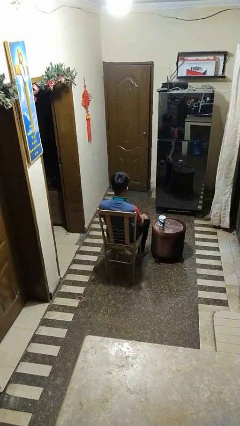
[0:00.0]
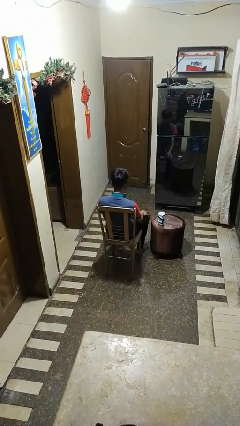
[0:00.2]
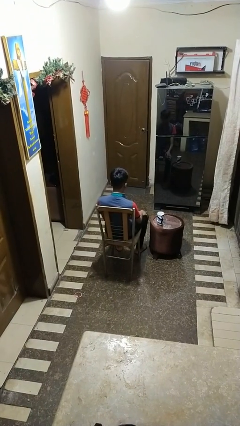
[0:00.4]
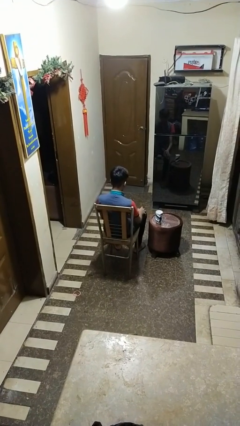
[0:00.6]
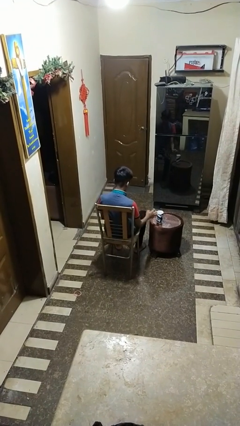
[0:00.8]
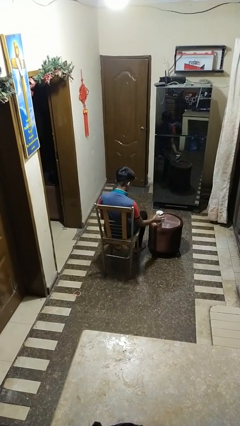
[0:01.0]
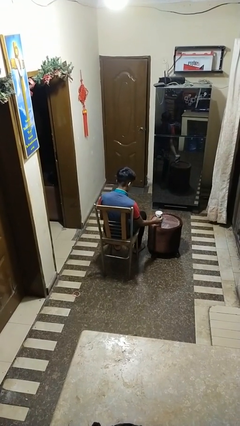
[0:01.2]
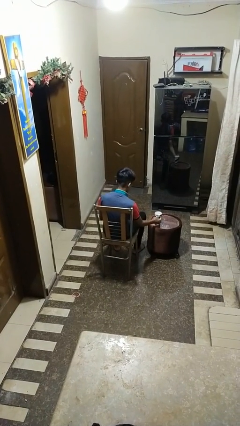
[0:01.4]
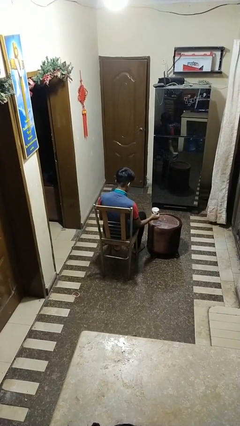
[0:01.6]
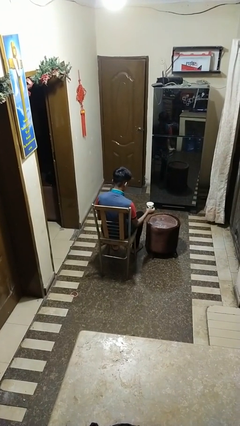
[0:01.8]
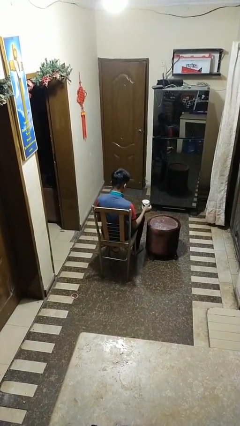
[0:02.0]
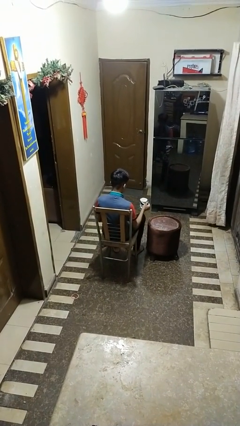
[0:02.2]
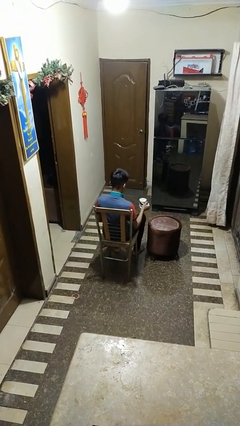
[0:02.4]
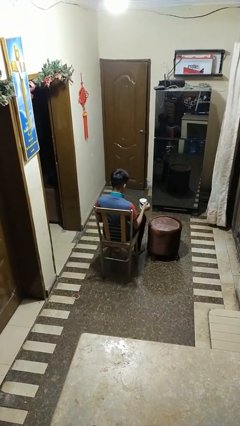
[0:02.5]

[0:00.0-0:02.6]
person picks up object from table

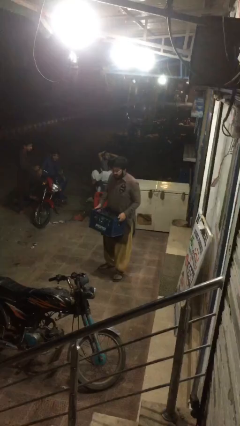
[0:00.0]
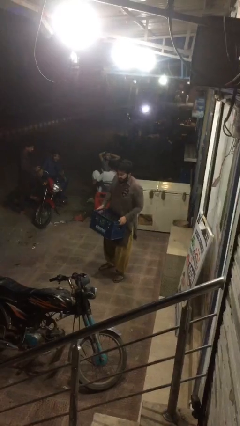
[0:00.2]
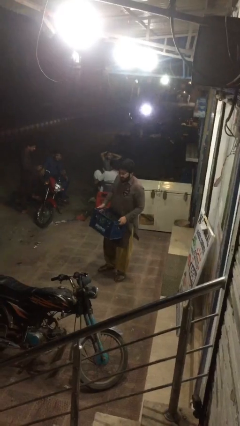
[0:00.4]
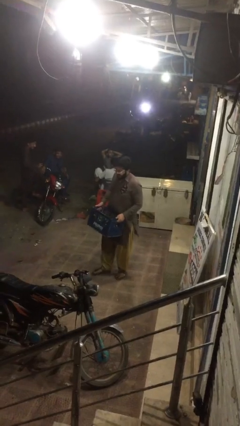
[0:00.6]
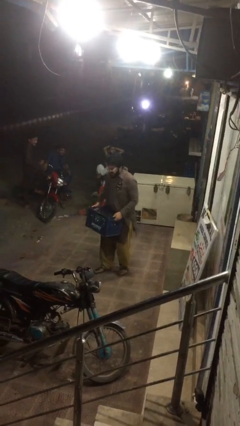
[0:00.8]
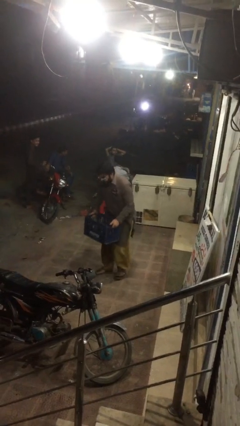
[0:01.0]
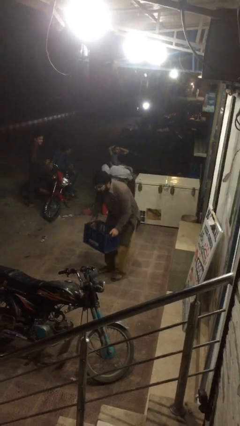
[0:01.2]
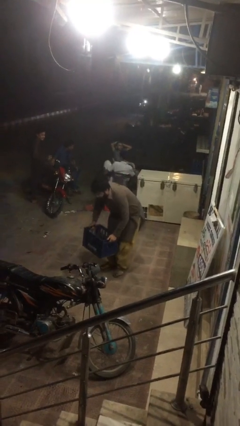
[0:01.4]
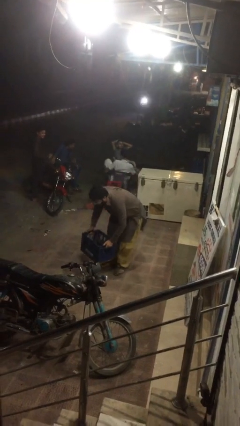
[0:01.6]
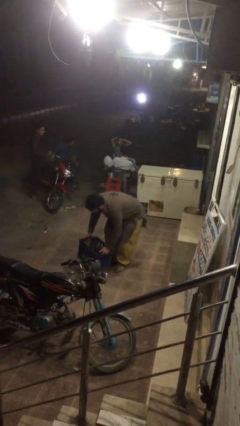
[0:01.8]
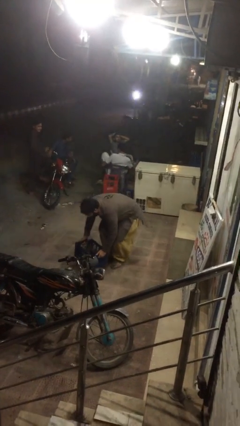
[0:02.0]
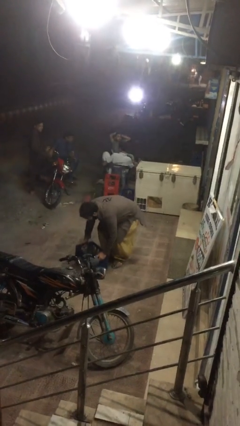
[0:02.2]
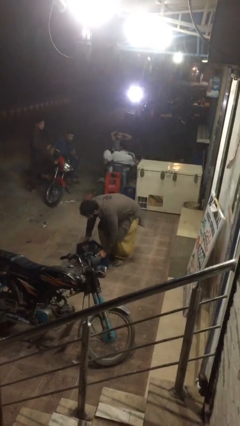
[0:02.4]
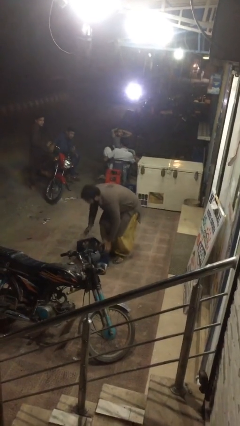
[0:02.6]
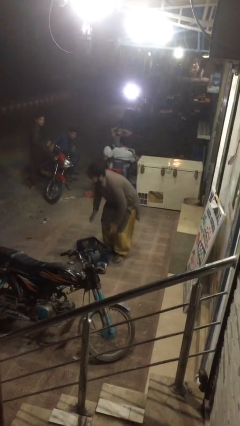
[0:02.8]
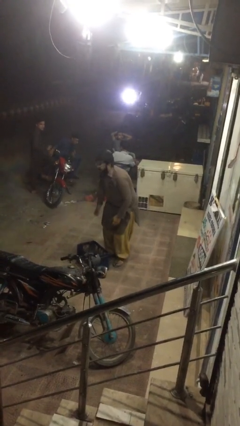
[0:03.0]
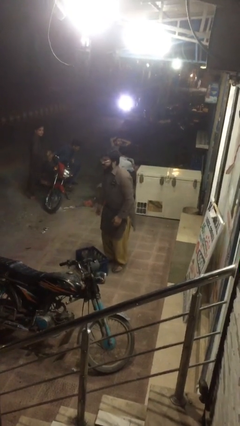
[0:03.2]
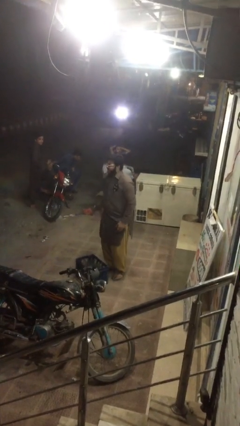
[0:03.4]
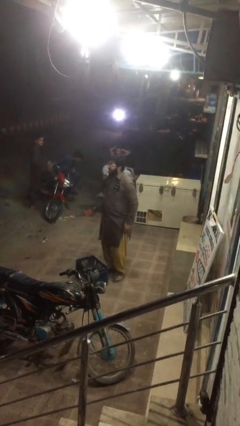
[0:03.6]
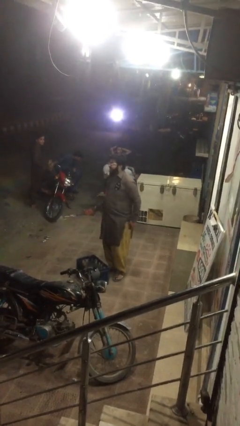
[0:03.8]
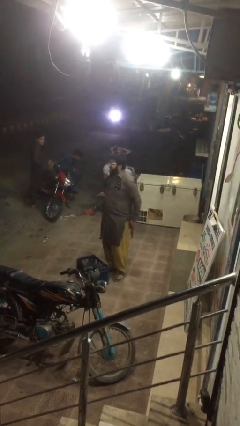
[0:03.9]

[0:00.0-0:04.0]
person puts down object on floor

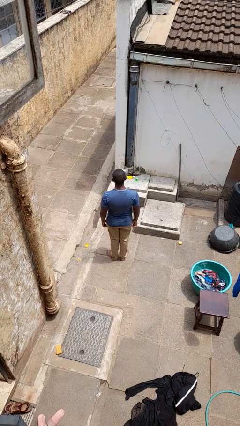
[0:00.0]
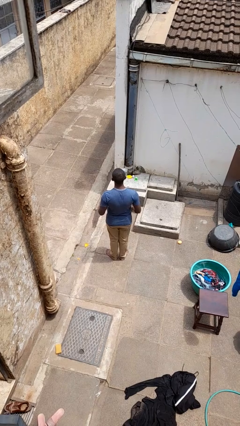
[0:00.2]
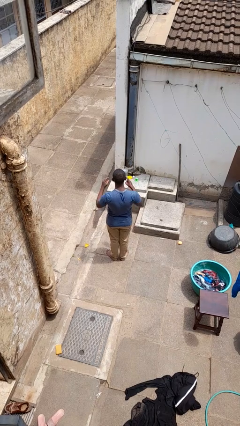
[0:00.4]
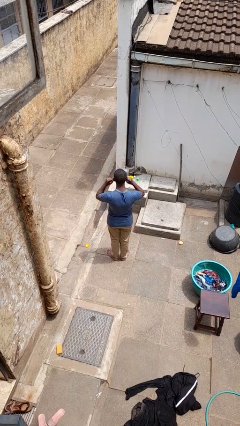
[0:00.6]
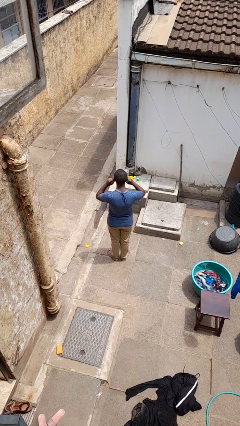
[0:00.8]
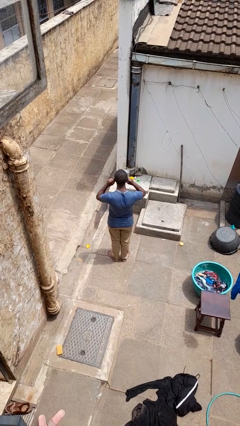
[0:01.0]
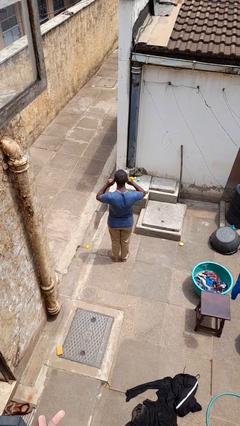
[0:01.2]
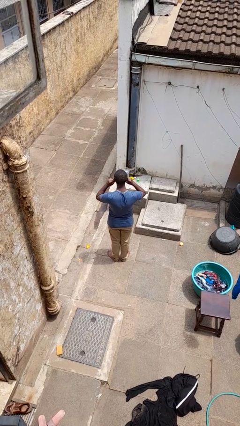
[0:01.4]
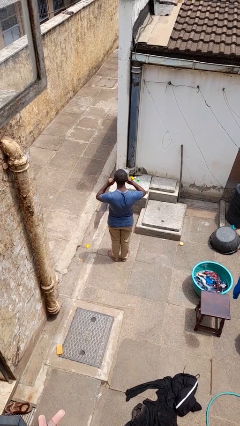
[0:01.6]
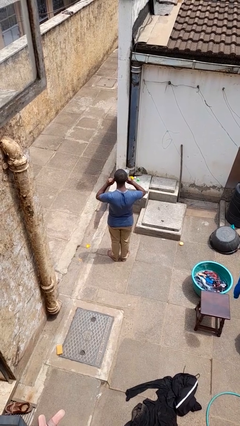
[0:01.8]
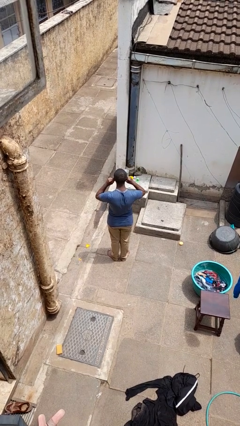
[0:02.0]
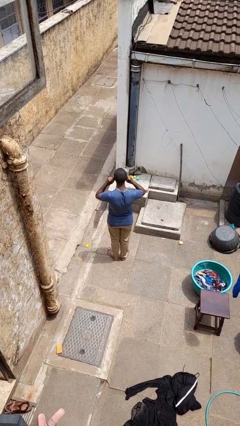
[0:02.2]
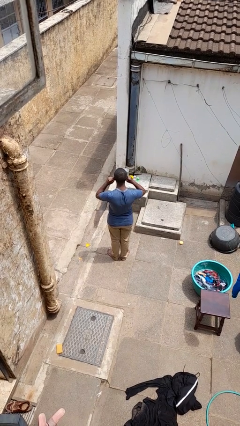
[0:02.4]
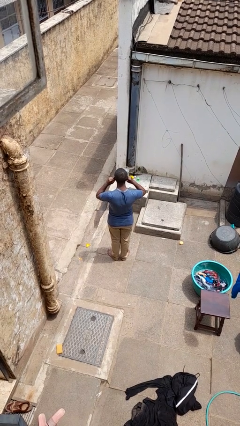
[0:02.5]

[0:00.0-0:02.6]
person puts fingers in ear

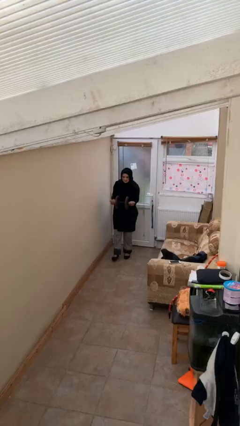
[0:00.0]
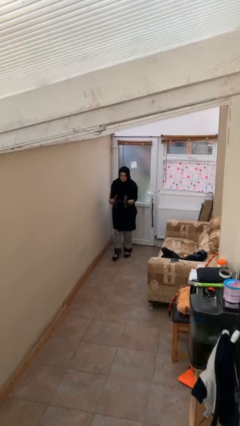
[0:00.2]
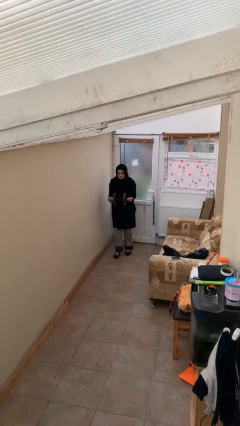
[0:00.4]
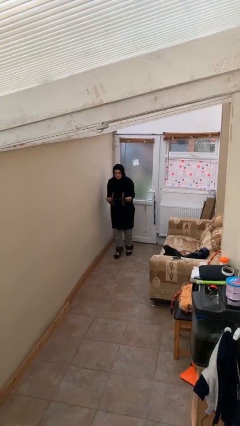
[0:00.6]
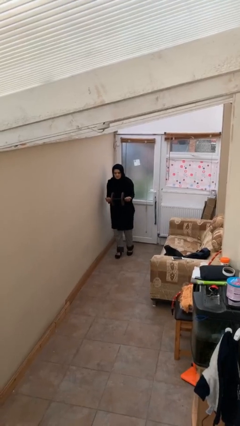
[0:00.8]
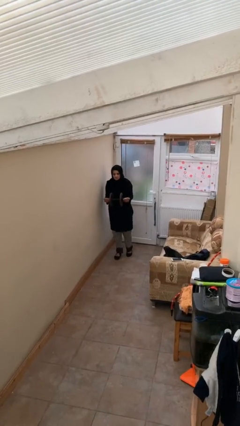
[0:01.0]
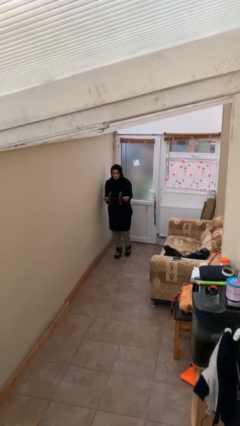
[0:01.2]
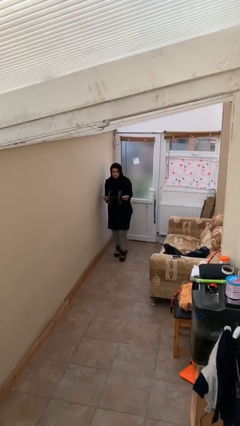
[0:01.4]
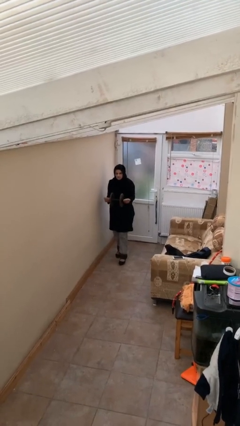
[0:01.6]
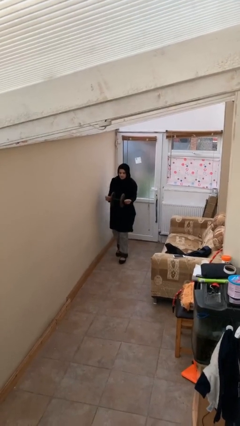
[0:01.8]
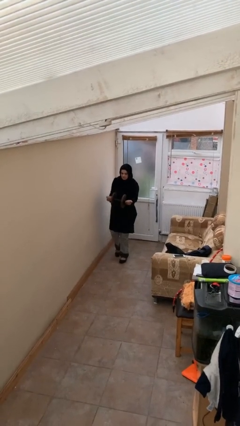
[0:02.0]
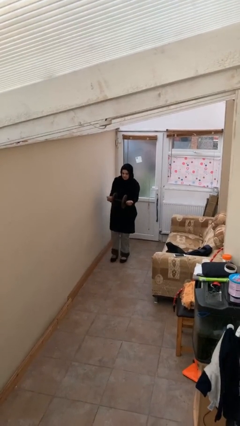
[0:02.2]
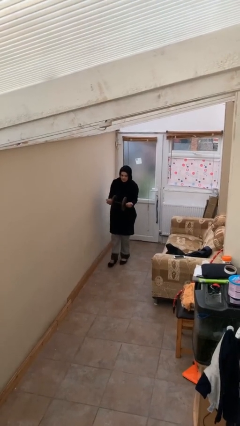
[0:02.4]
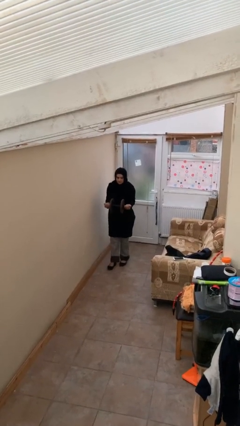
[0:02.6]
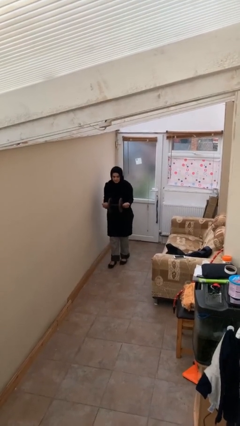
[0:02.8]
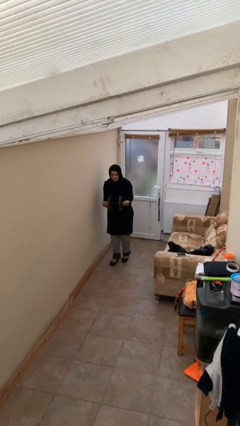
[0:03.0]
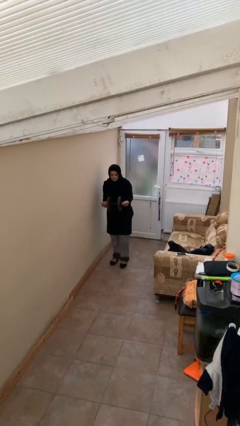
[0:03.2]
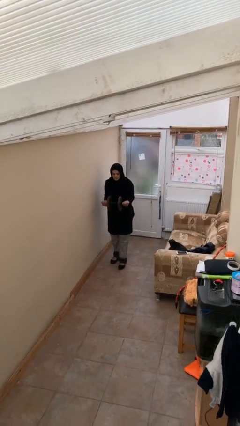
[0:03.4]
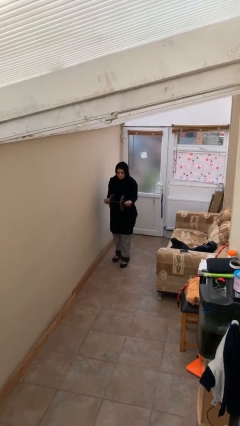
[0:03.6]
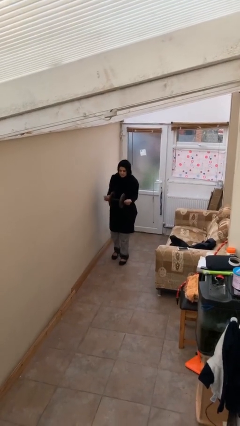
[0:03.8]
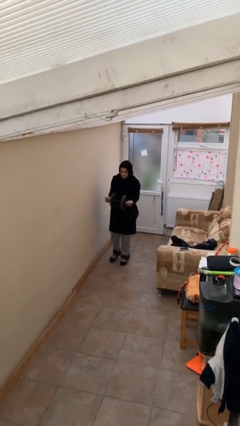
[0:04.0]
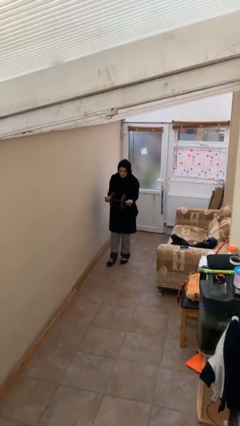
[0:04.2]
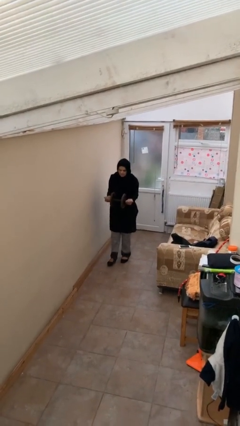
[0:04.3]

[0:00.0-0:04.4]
person carries heavy object

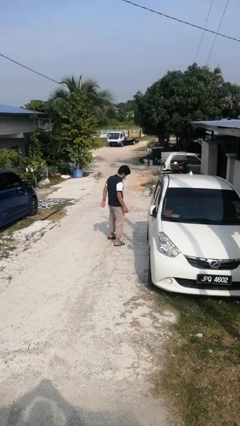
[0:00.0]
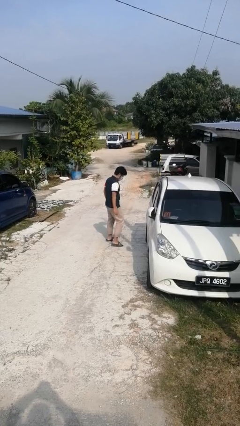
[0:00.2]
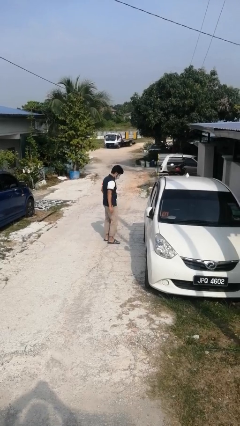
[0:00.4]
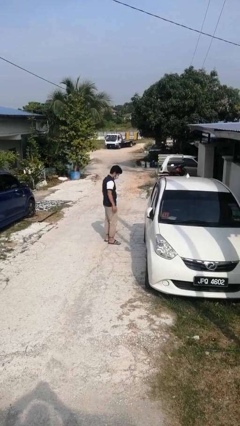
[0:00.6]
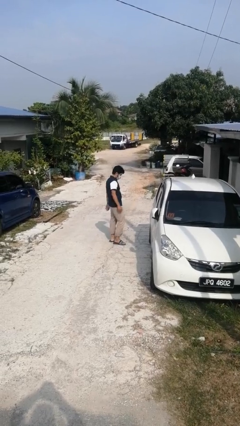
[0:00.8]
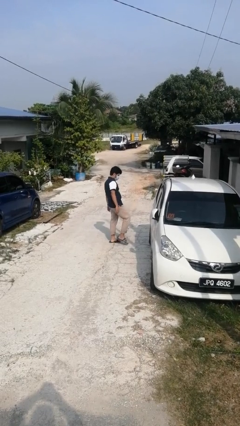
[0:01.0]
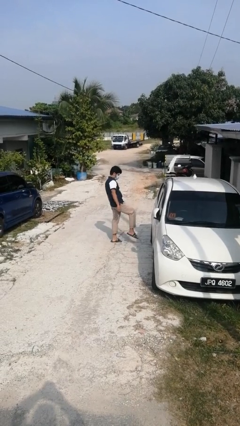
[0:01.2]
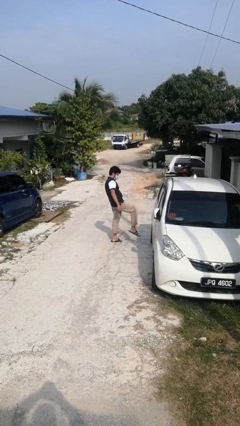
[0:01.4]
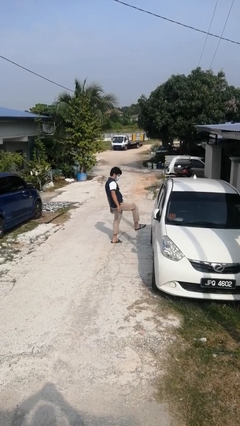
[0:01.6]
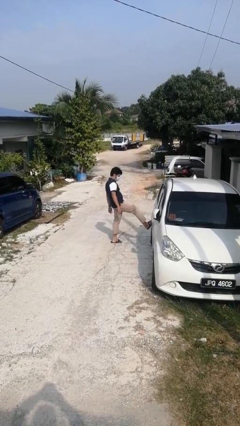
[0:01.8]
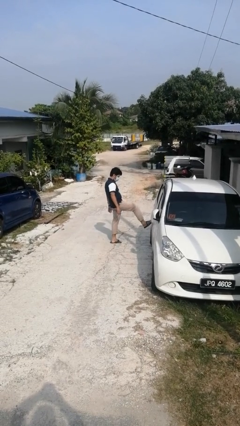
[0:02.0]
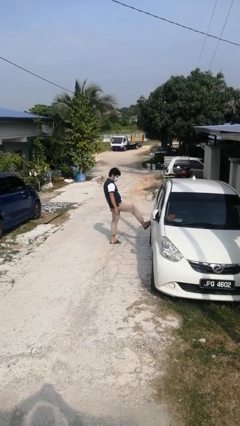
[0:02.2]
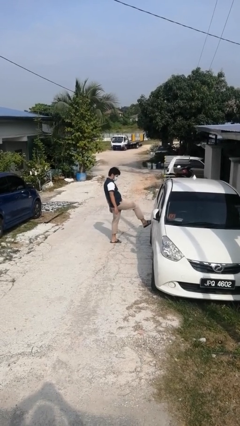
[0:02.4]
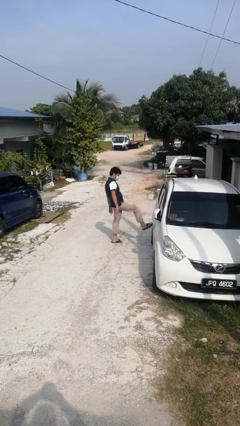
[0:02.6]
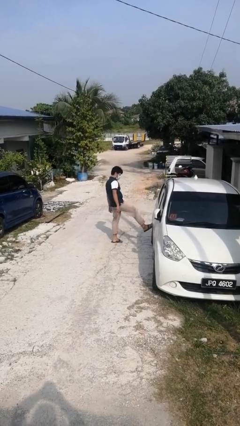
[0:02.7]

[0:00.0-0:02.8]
person kicks car tires

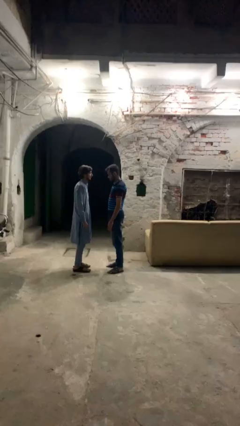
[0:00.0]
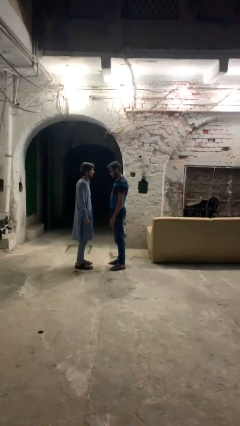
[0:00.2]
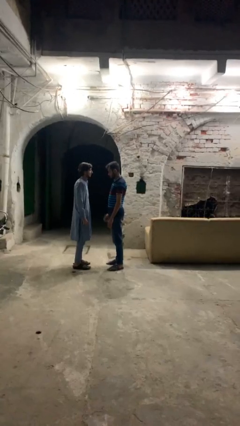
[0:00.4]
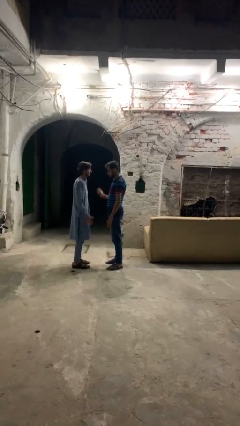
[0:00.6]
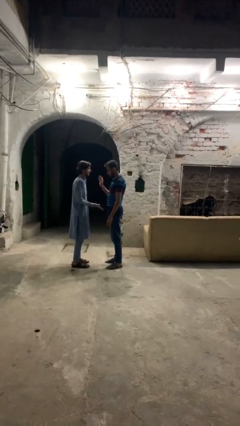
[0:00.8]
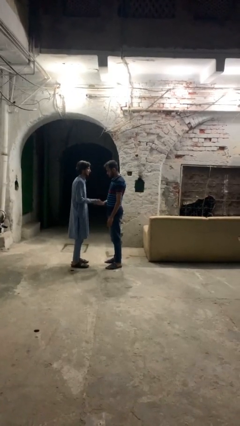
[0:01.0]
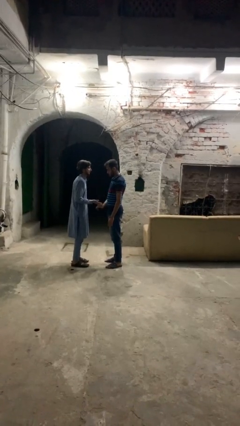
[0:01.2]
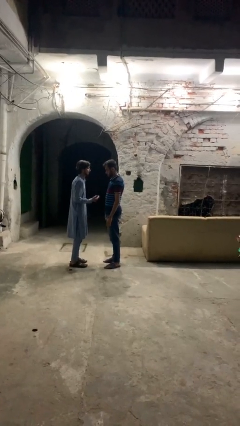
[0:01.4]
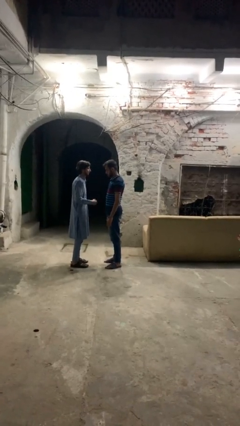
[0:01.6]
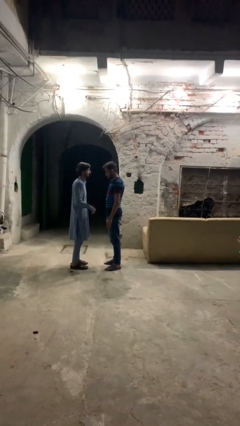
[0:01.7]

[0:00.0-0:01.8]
person highfives hand
